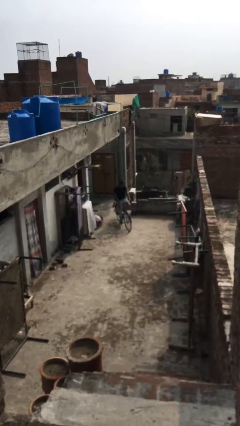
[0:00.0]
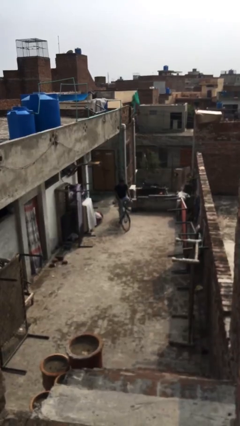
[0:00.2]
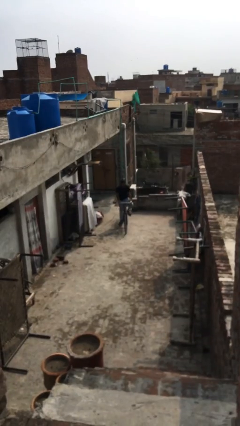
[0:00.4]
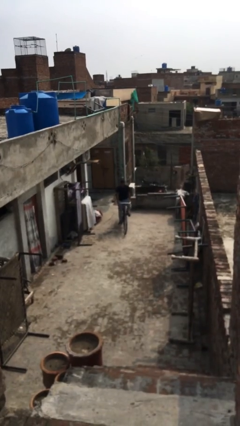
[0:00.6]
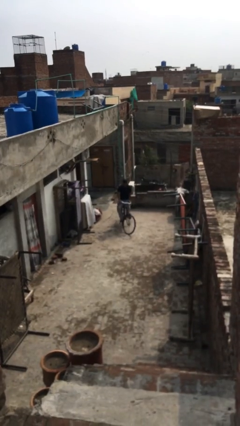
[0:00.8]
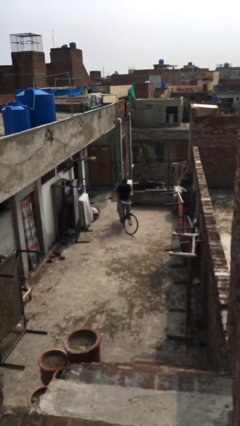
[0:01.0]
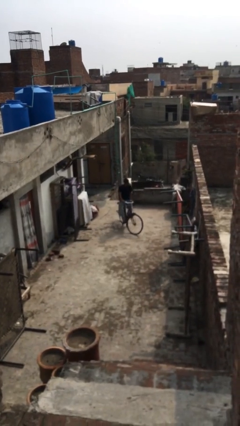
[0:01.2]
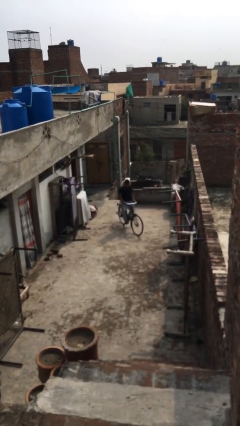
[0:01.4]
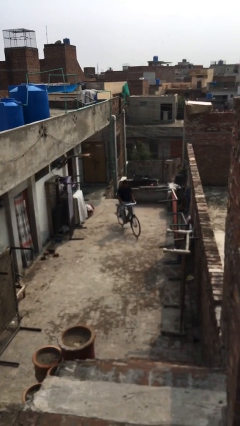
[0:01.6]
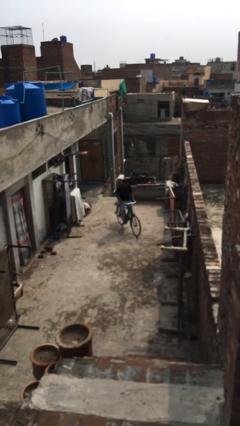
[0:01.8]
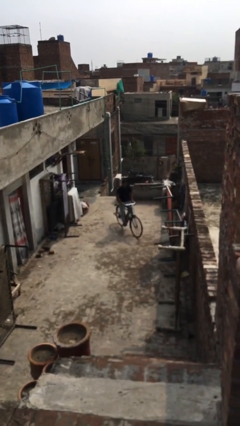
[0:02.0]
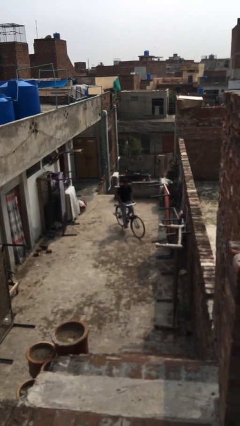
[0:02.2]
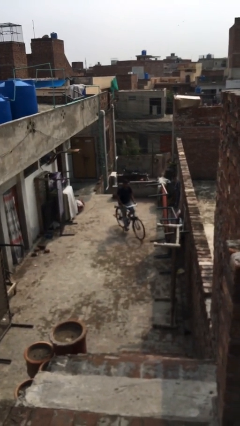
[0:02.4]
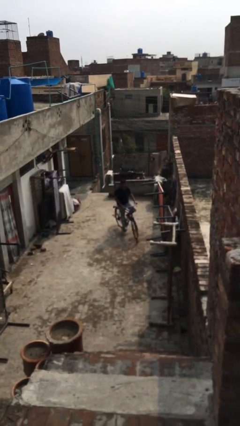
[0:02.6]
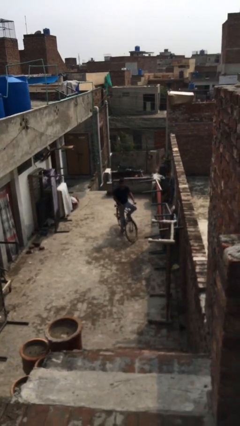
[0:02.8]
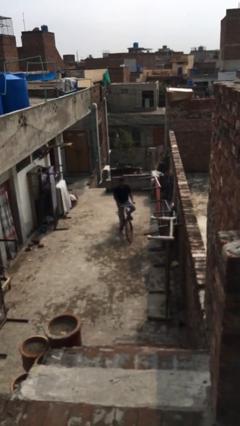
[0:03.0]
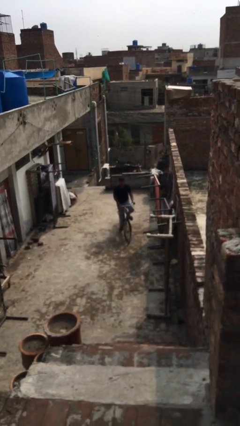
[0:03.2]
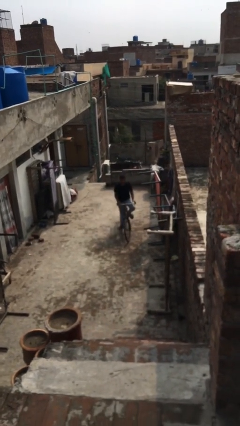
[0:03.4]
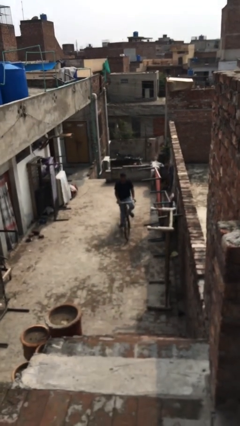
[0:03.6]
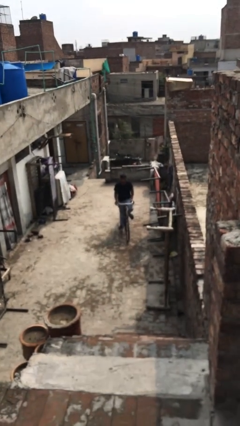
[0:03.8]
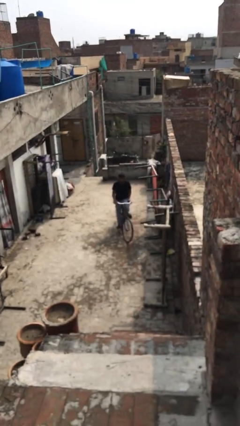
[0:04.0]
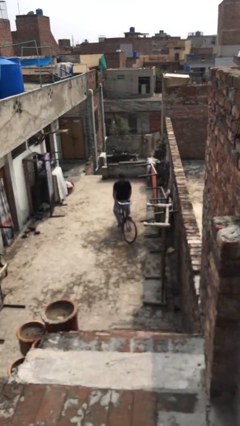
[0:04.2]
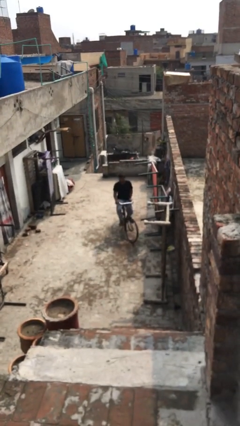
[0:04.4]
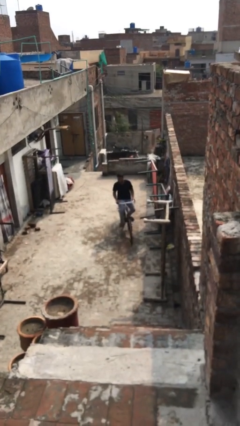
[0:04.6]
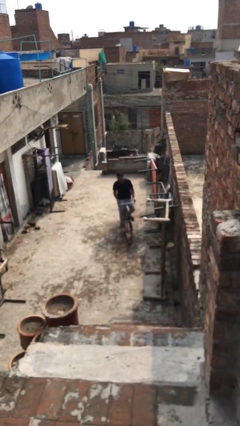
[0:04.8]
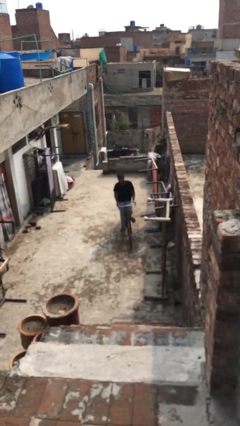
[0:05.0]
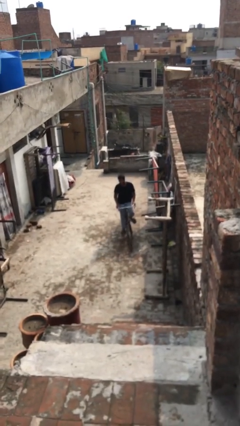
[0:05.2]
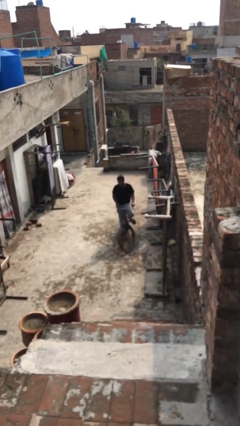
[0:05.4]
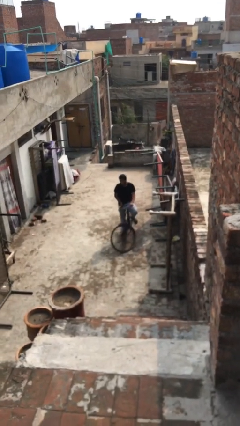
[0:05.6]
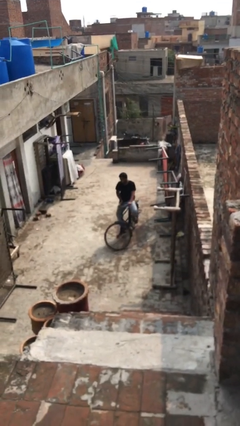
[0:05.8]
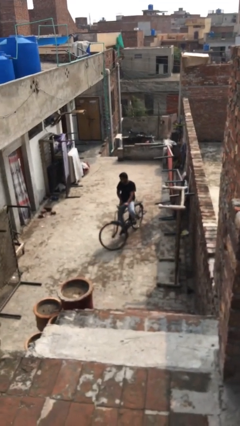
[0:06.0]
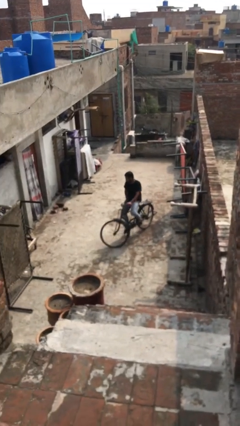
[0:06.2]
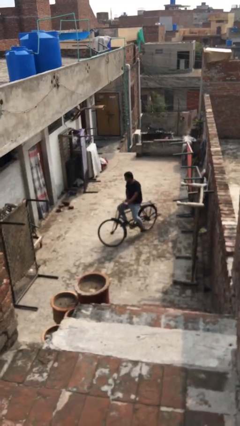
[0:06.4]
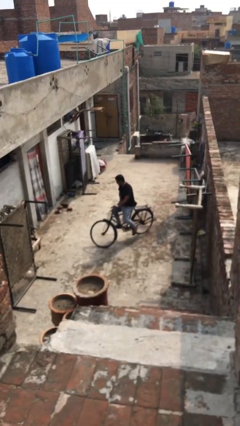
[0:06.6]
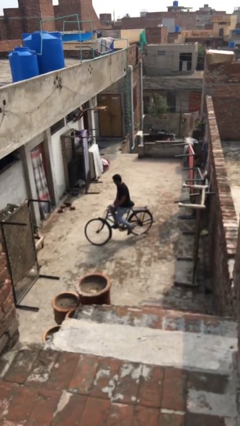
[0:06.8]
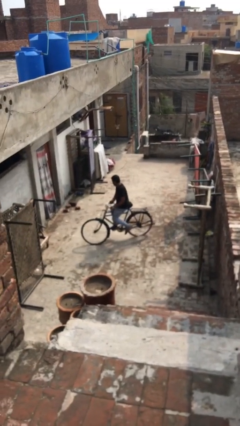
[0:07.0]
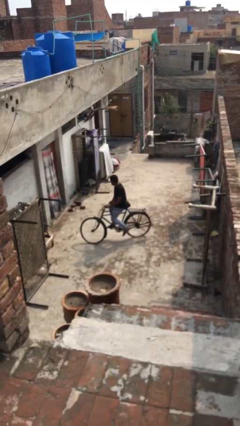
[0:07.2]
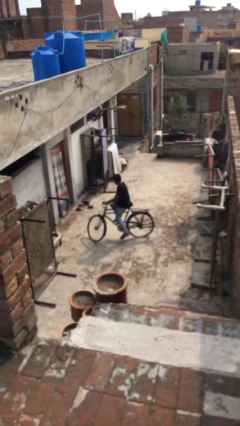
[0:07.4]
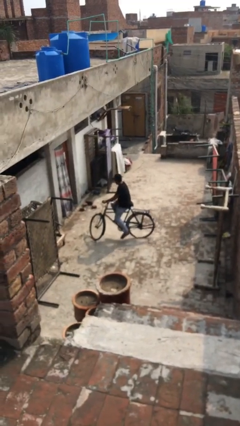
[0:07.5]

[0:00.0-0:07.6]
person rides bicycle

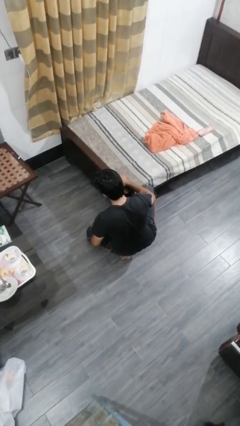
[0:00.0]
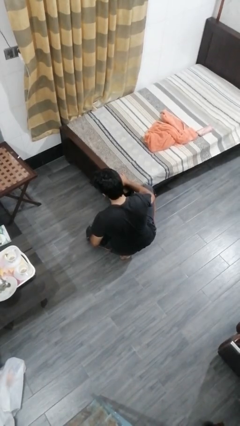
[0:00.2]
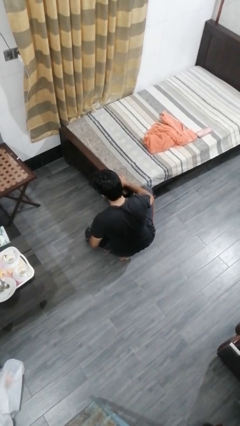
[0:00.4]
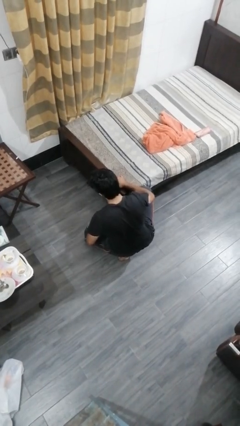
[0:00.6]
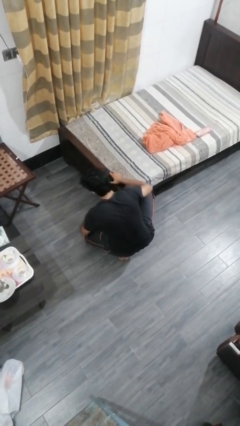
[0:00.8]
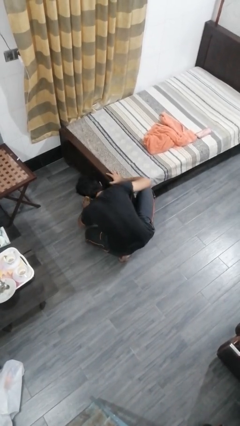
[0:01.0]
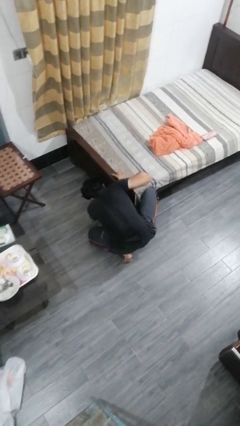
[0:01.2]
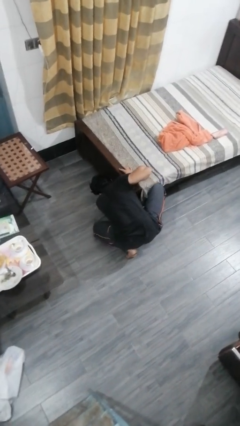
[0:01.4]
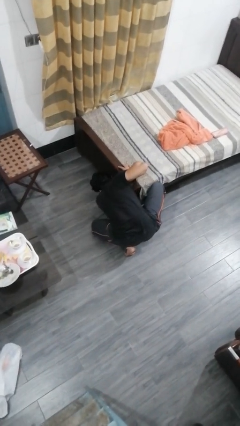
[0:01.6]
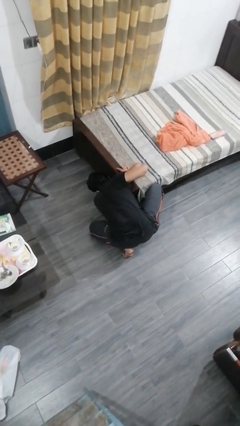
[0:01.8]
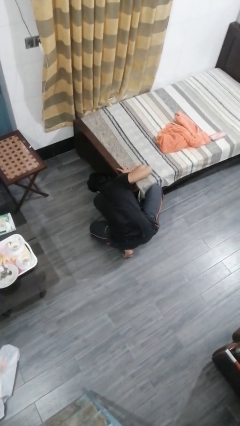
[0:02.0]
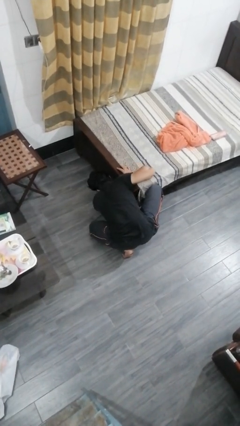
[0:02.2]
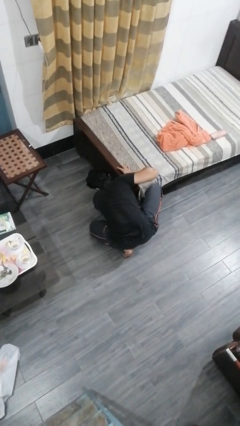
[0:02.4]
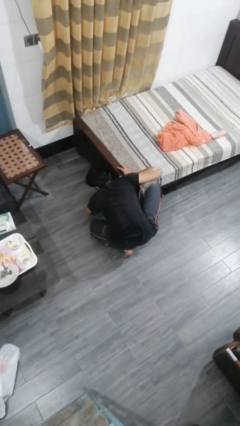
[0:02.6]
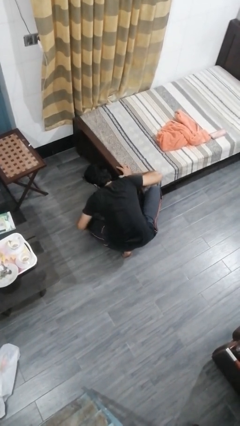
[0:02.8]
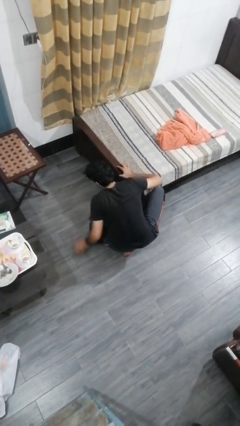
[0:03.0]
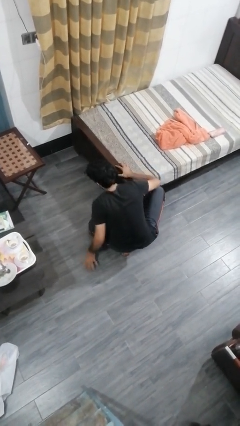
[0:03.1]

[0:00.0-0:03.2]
person searches under bed

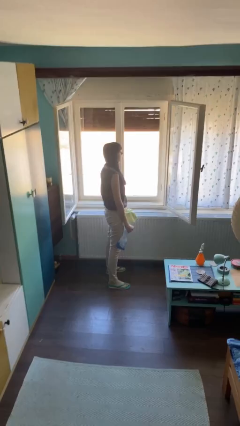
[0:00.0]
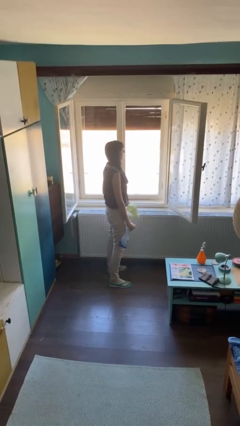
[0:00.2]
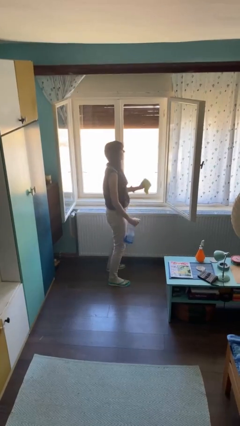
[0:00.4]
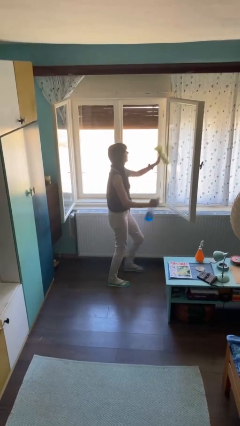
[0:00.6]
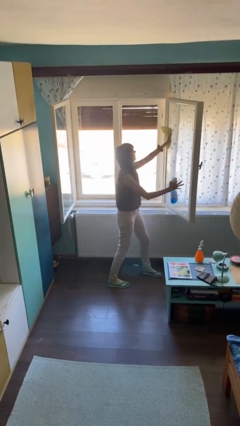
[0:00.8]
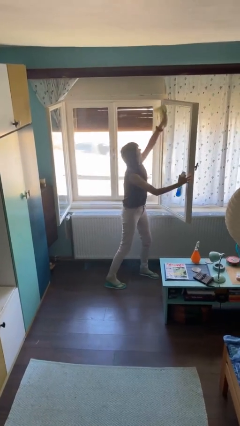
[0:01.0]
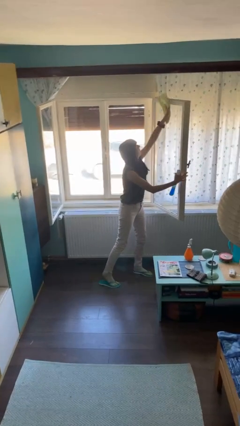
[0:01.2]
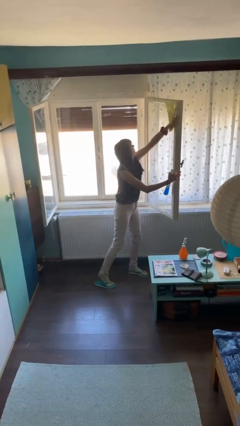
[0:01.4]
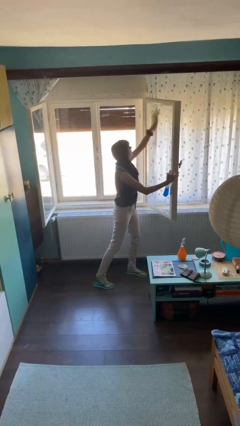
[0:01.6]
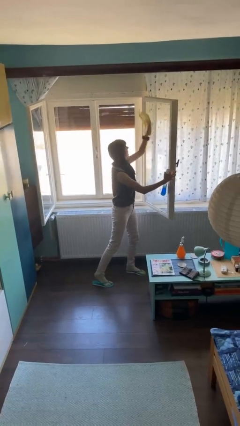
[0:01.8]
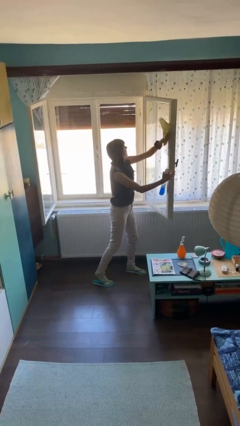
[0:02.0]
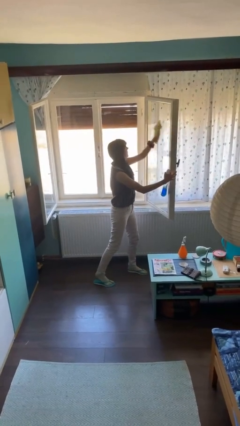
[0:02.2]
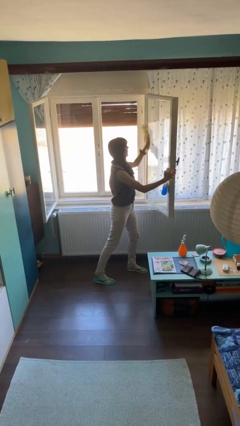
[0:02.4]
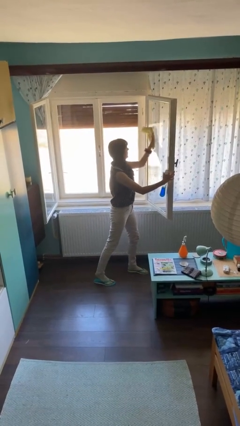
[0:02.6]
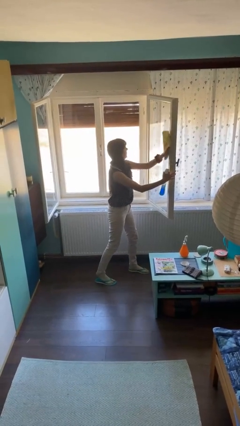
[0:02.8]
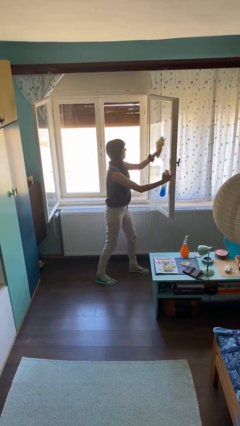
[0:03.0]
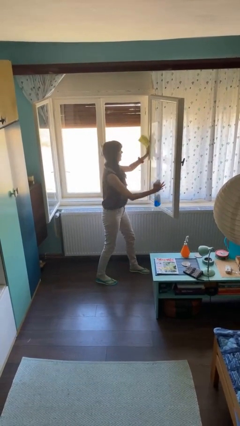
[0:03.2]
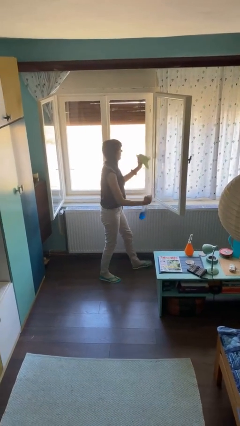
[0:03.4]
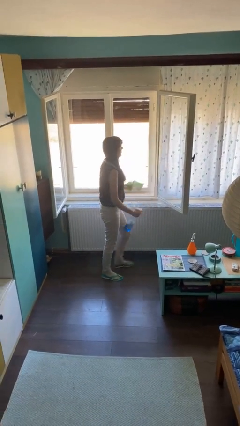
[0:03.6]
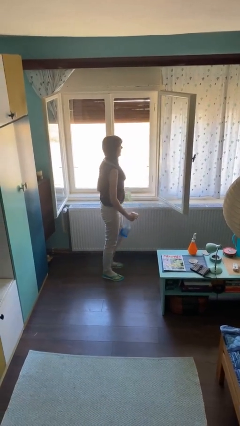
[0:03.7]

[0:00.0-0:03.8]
person washes window

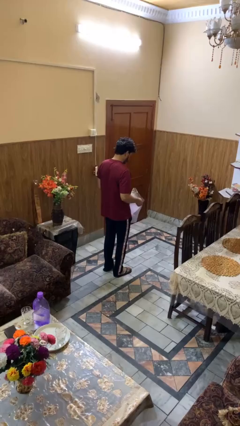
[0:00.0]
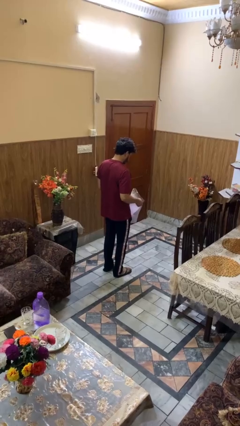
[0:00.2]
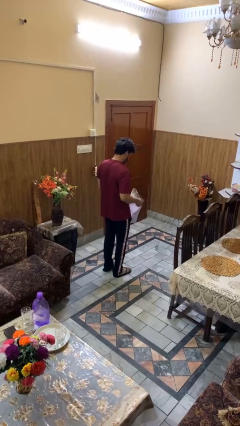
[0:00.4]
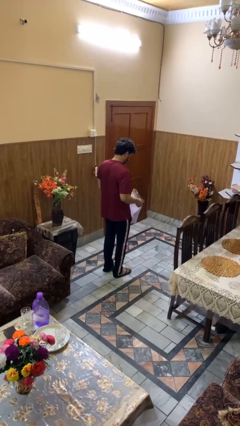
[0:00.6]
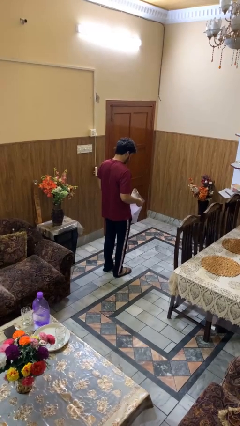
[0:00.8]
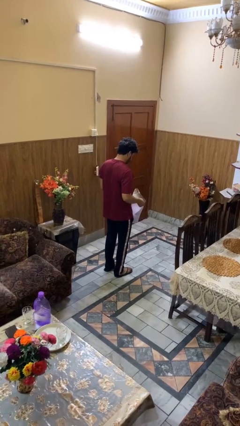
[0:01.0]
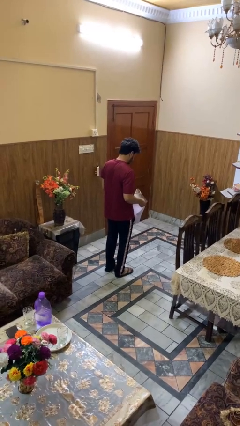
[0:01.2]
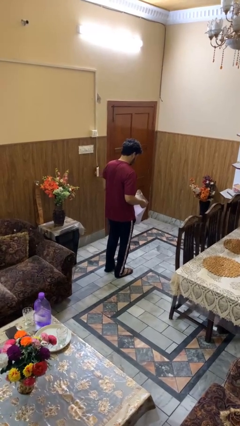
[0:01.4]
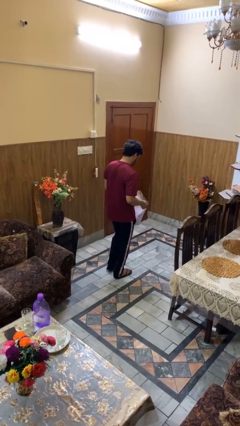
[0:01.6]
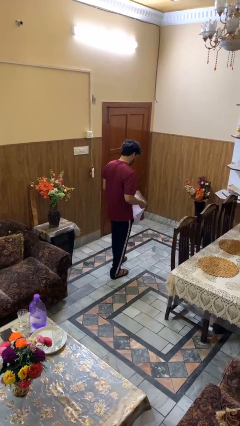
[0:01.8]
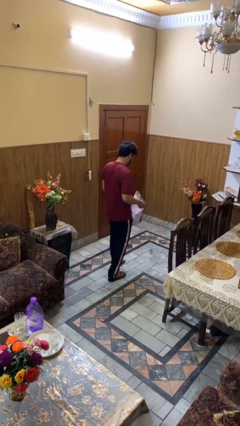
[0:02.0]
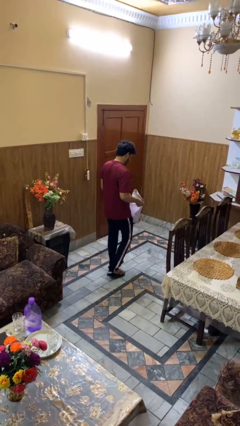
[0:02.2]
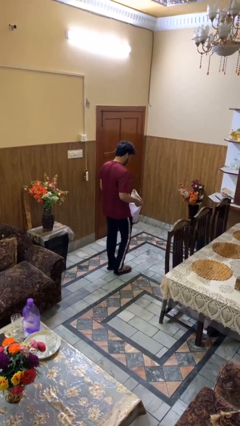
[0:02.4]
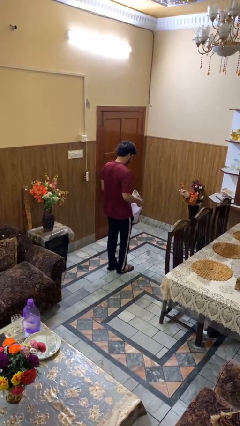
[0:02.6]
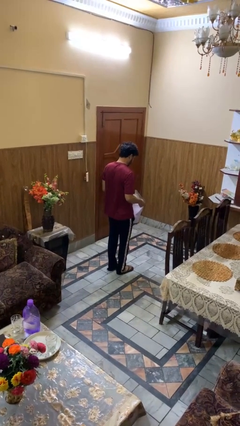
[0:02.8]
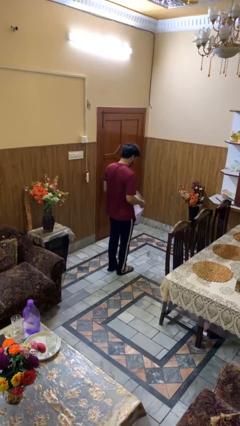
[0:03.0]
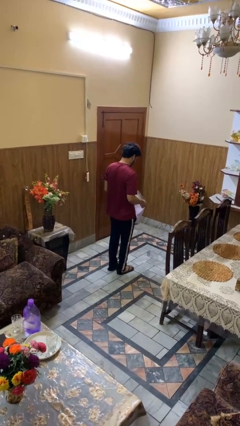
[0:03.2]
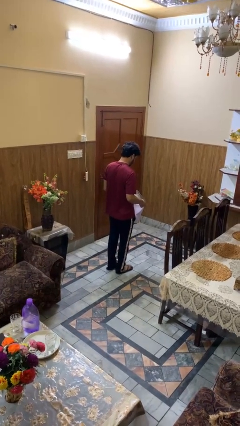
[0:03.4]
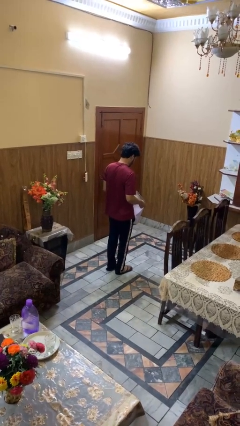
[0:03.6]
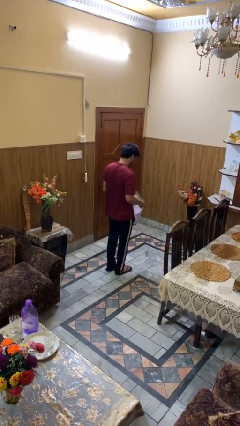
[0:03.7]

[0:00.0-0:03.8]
person carries laundry basket
